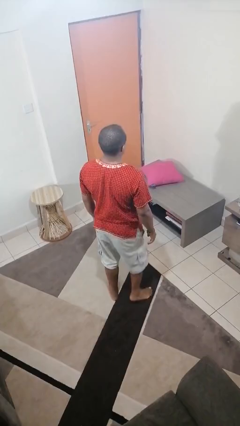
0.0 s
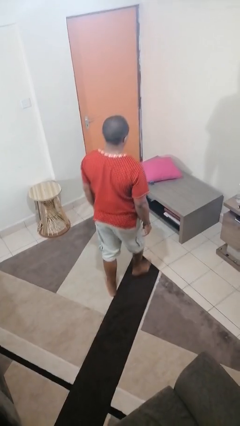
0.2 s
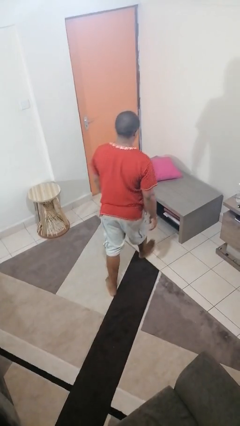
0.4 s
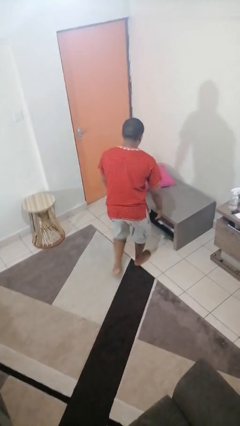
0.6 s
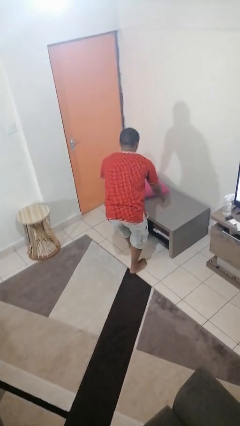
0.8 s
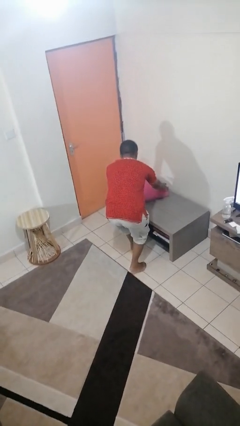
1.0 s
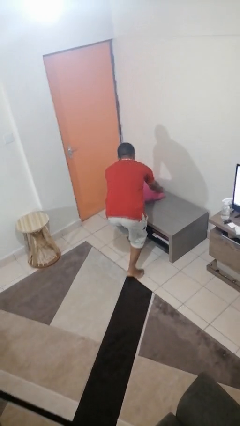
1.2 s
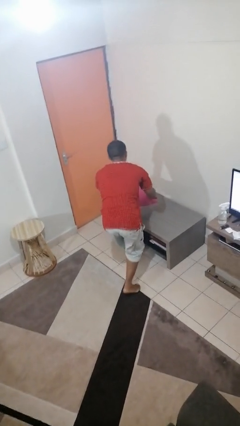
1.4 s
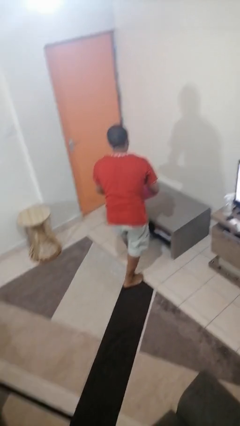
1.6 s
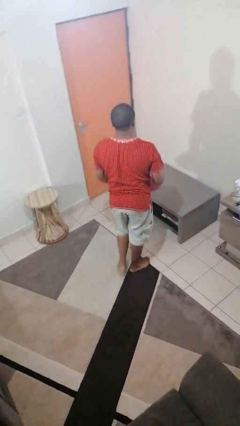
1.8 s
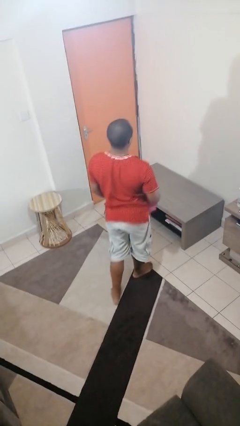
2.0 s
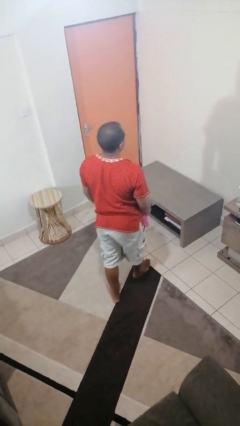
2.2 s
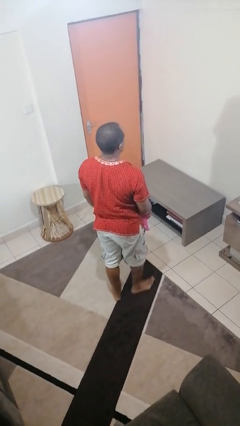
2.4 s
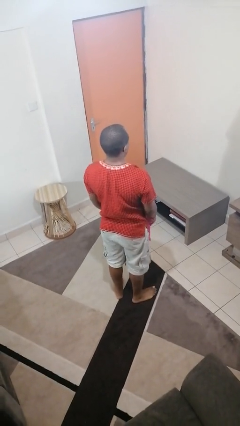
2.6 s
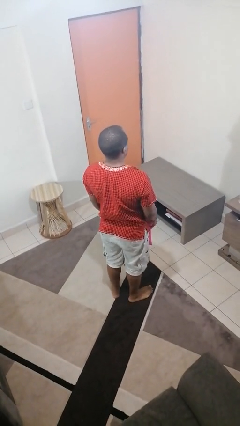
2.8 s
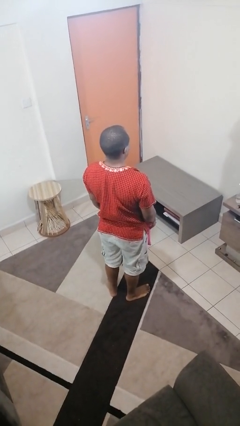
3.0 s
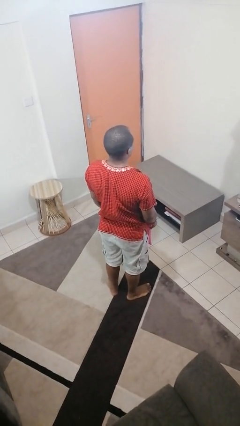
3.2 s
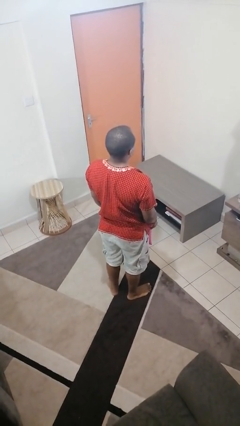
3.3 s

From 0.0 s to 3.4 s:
person picks up object from table

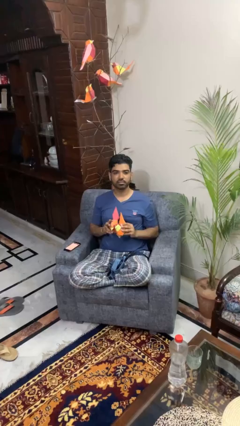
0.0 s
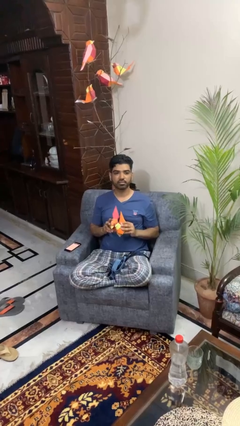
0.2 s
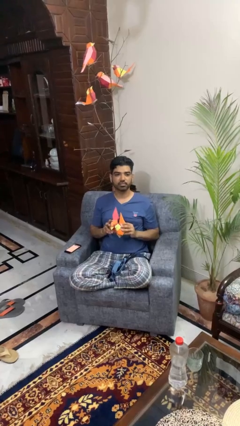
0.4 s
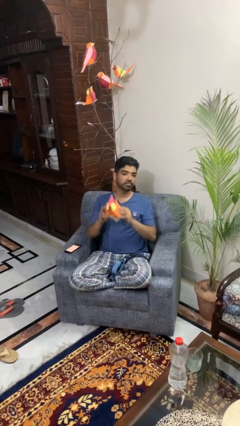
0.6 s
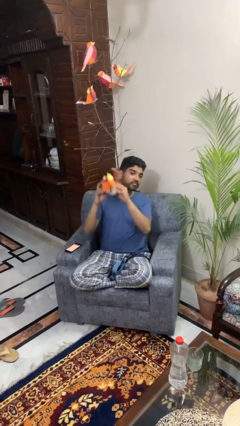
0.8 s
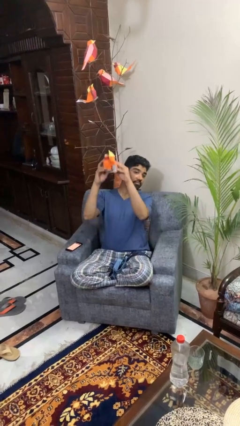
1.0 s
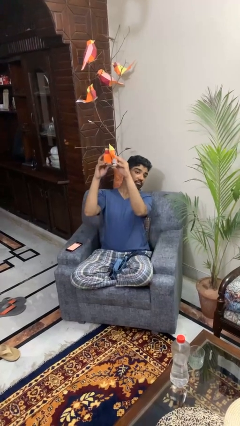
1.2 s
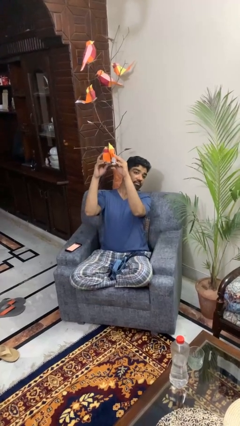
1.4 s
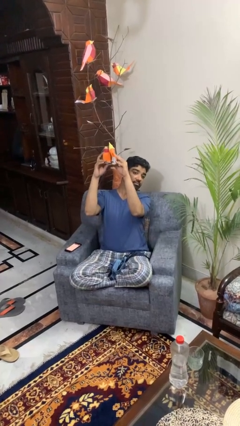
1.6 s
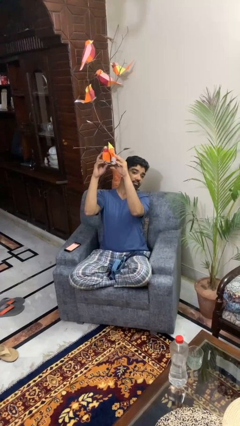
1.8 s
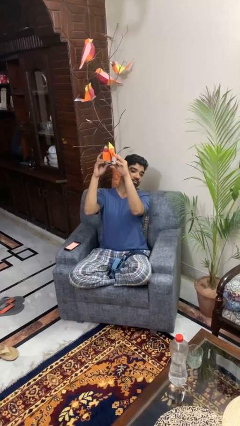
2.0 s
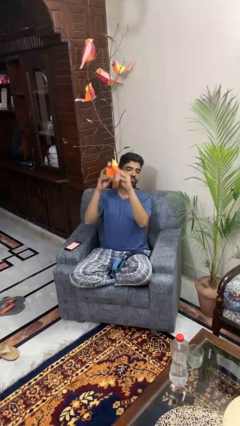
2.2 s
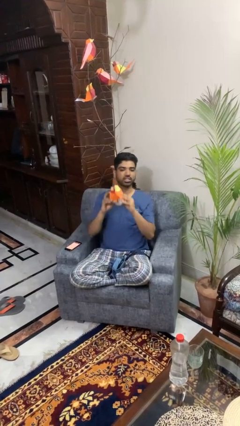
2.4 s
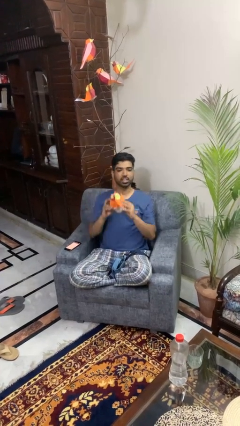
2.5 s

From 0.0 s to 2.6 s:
person holds object above head

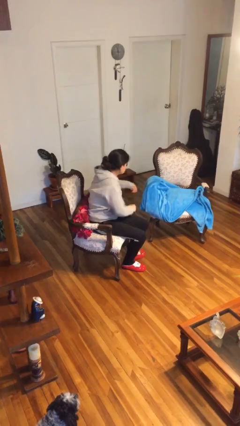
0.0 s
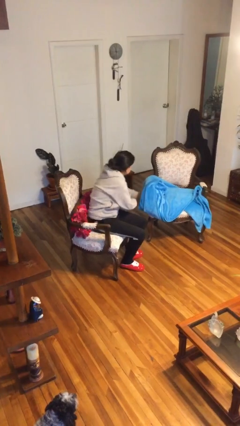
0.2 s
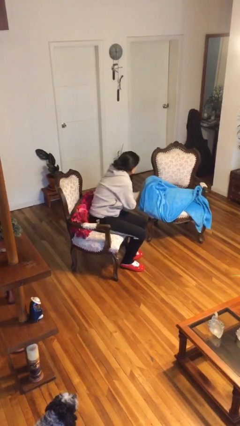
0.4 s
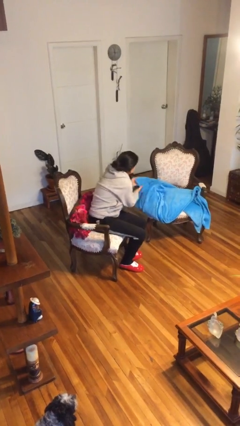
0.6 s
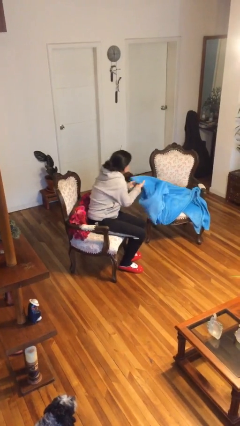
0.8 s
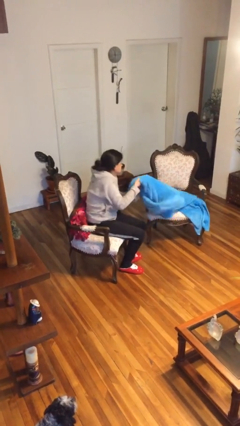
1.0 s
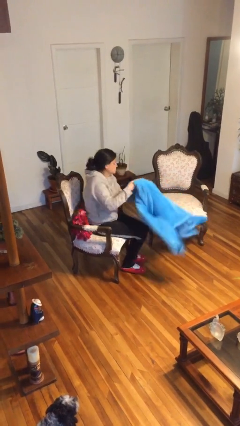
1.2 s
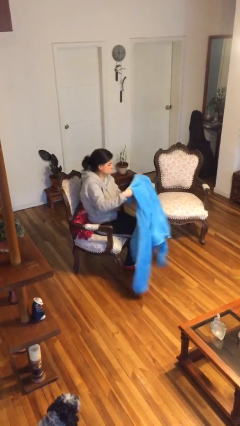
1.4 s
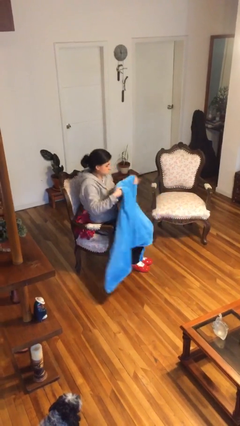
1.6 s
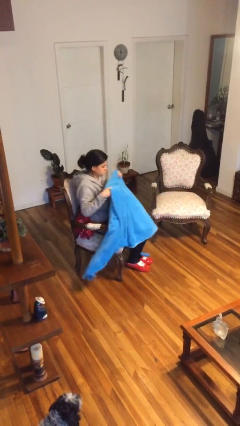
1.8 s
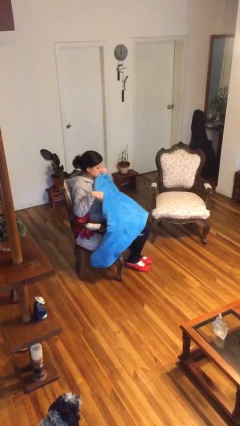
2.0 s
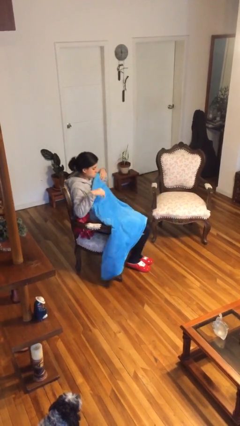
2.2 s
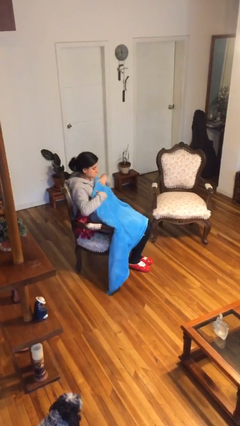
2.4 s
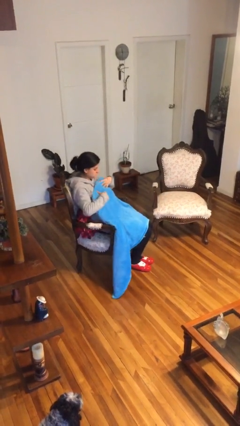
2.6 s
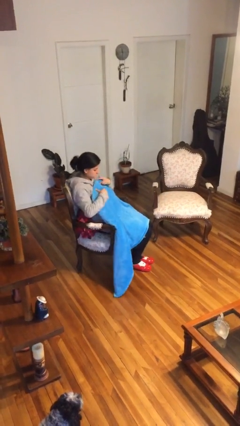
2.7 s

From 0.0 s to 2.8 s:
person covers with blanket

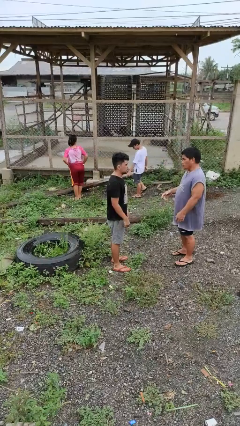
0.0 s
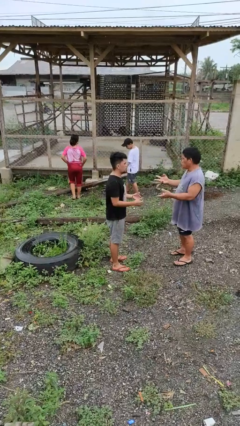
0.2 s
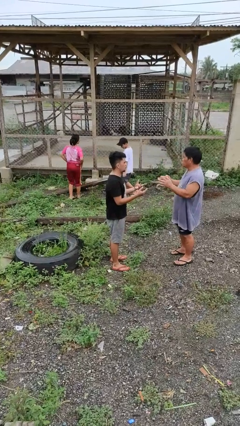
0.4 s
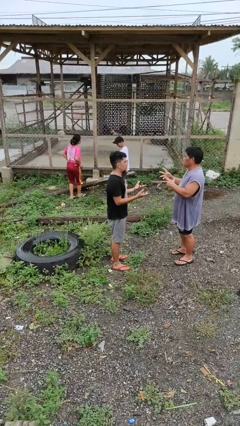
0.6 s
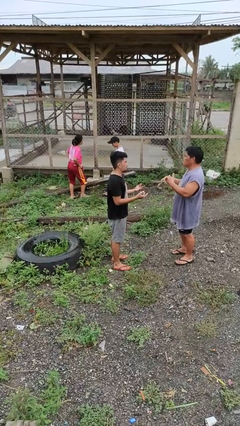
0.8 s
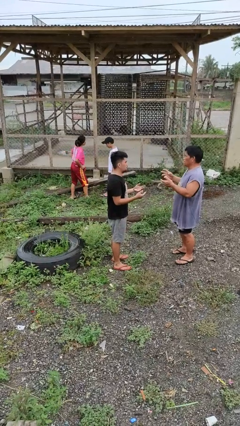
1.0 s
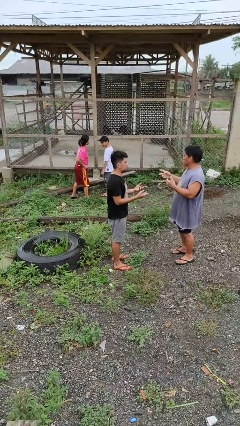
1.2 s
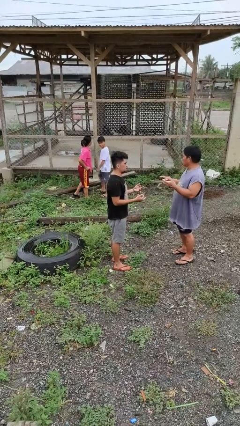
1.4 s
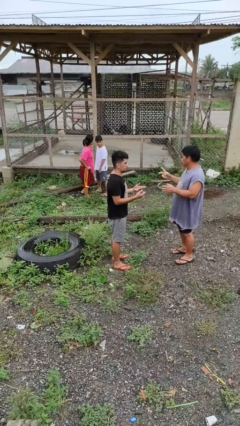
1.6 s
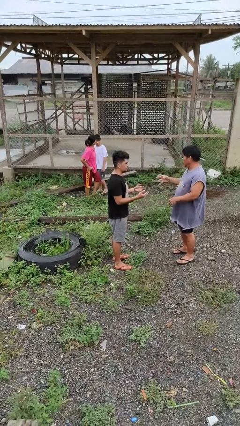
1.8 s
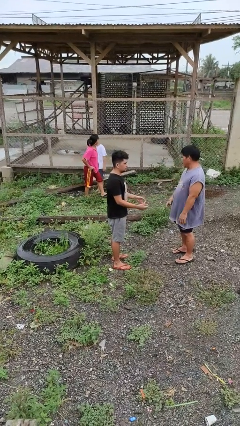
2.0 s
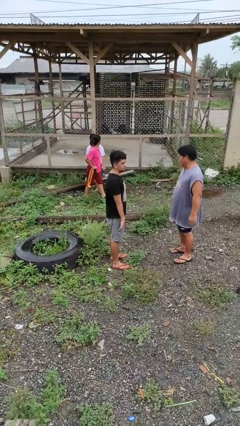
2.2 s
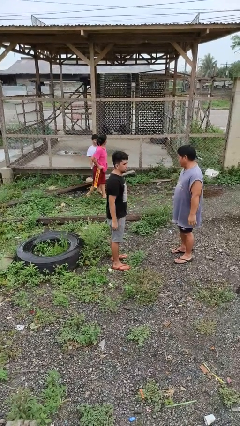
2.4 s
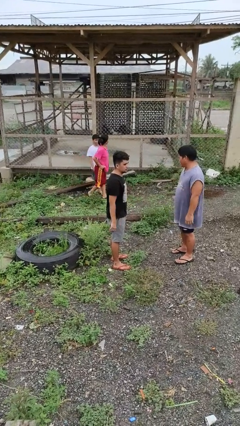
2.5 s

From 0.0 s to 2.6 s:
person talks to person

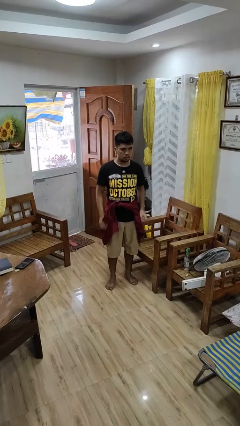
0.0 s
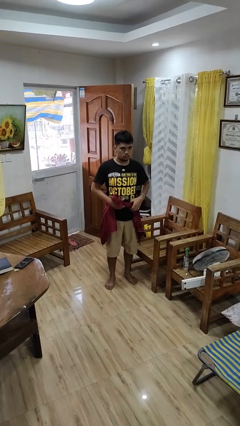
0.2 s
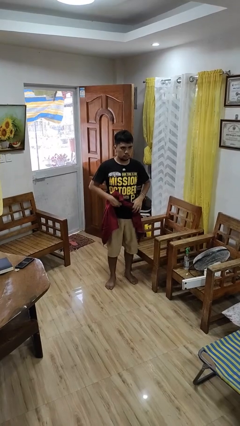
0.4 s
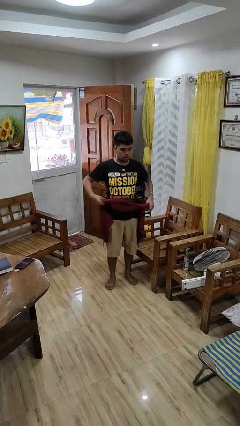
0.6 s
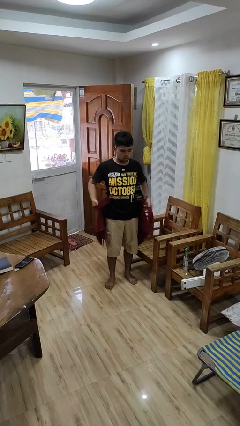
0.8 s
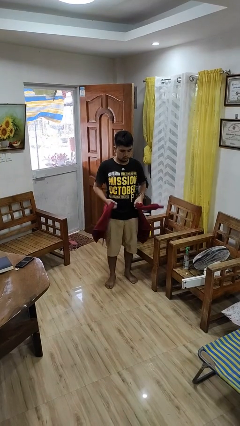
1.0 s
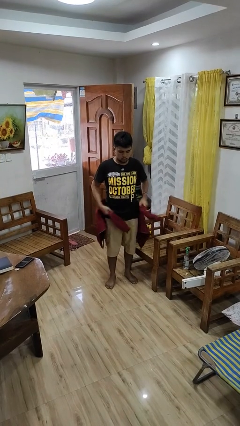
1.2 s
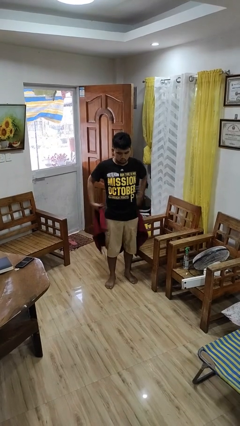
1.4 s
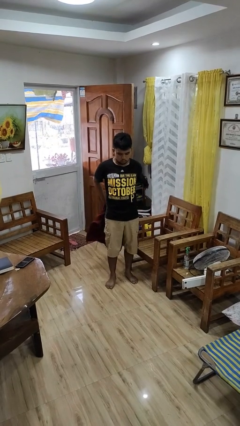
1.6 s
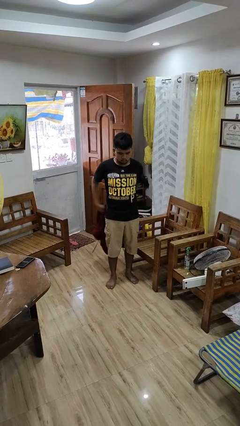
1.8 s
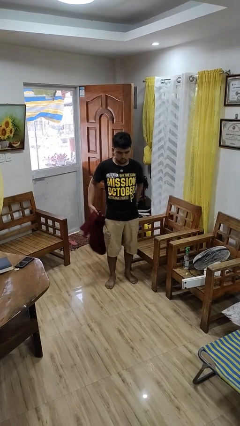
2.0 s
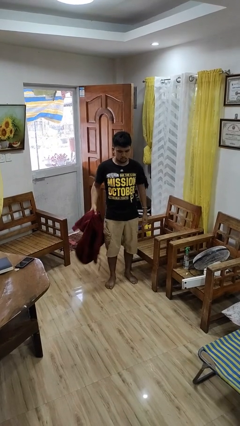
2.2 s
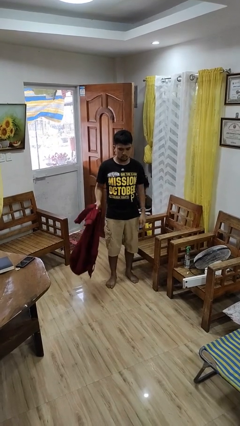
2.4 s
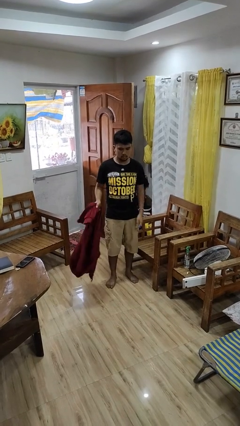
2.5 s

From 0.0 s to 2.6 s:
person unties jacket around waist

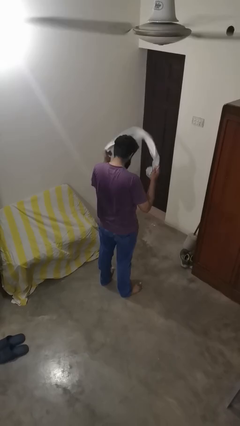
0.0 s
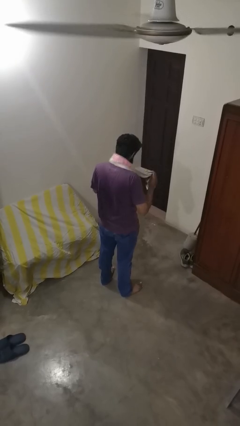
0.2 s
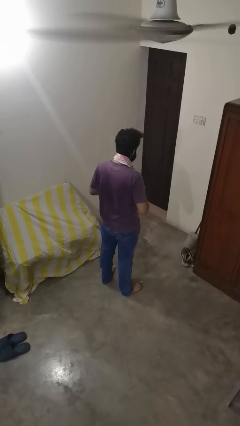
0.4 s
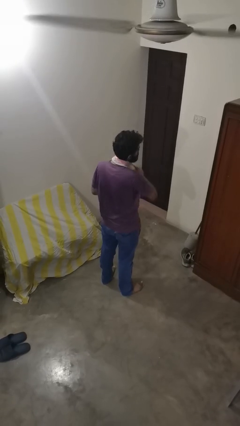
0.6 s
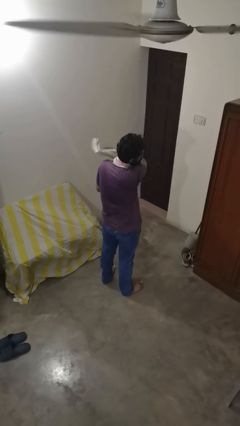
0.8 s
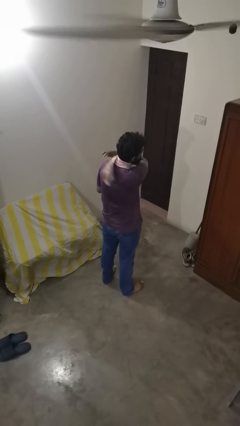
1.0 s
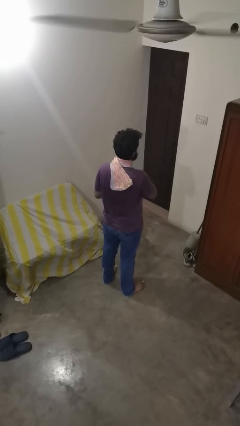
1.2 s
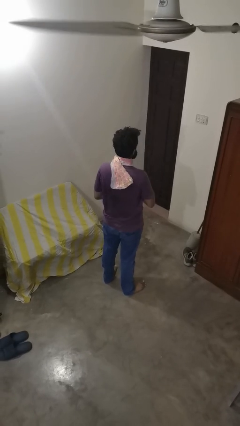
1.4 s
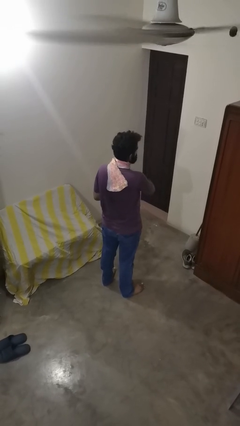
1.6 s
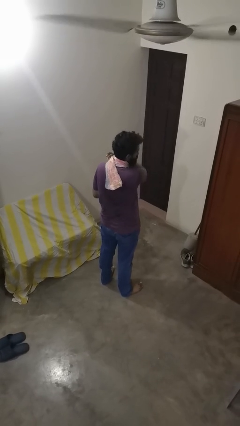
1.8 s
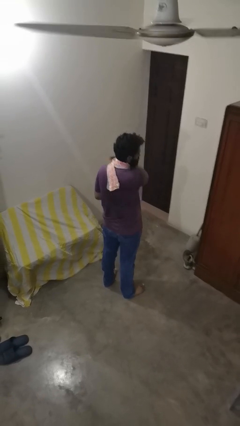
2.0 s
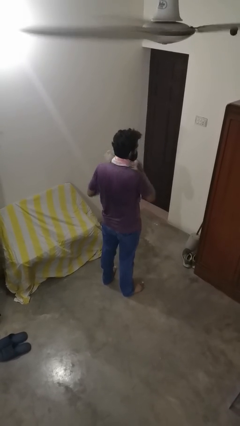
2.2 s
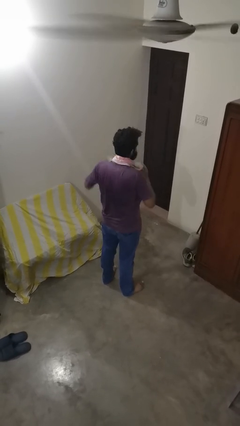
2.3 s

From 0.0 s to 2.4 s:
person puts on scarf

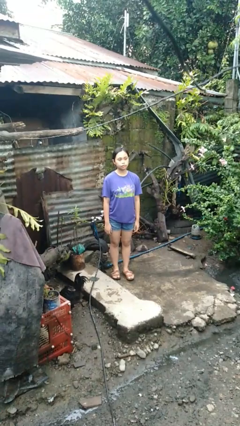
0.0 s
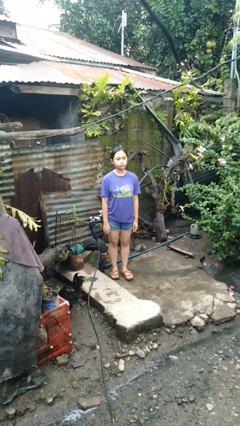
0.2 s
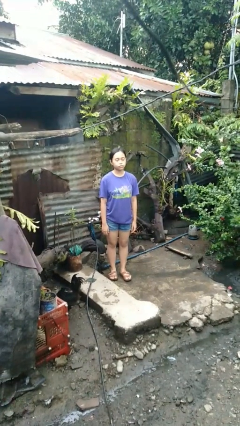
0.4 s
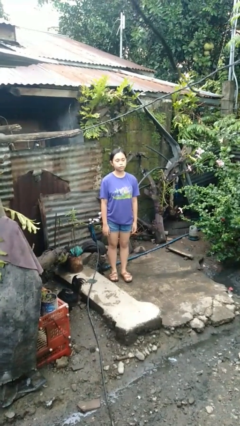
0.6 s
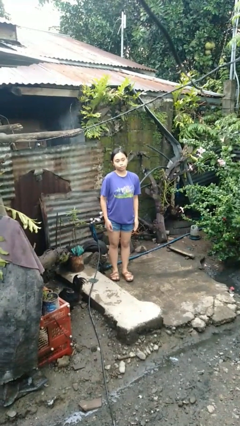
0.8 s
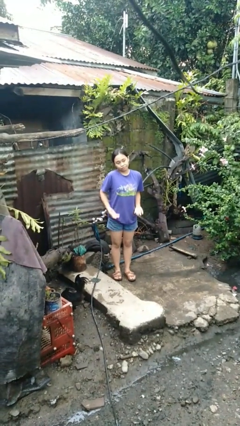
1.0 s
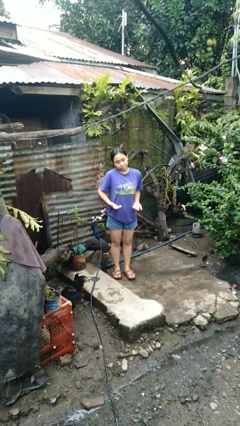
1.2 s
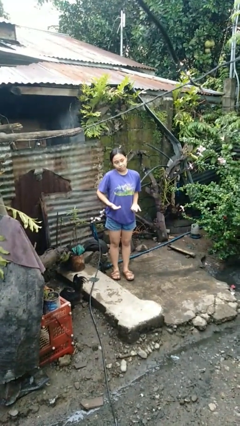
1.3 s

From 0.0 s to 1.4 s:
person shrugs
